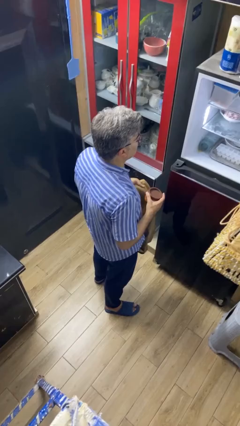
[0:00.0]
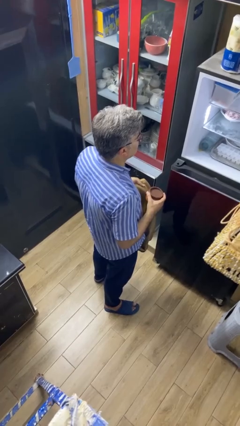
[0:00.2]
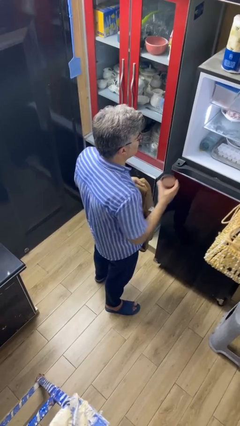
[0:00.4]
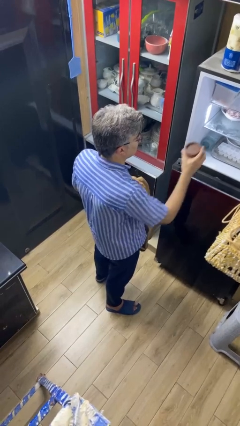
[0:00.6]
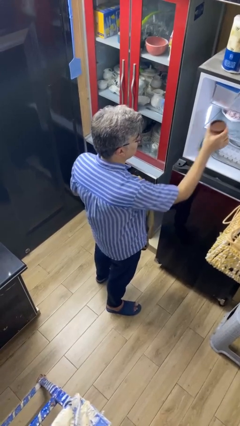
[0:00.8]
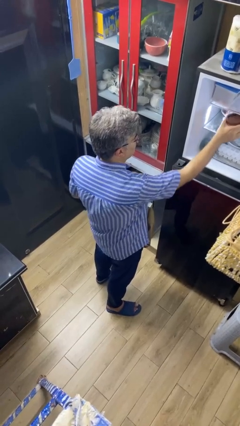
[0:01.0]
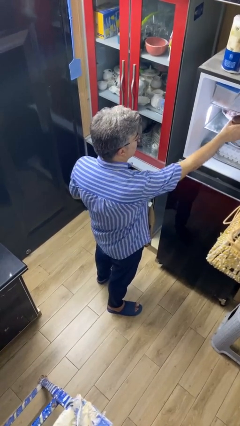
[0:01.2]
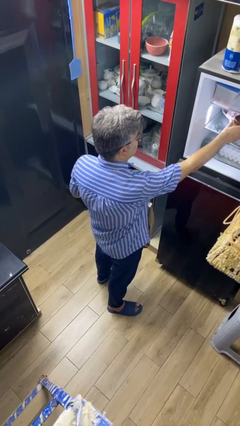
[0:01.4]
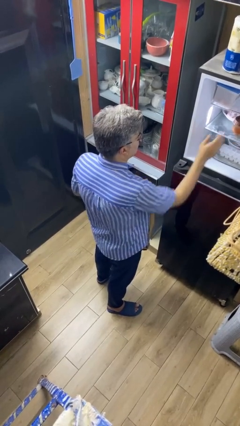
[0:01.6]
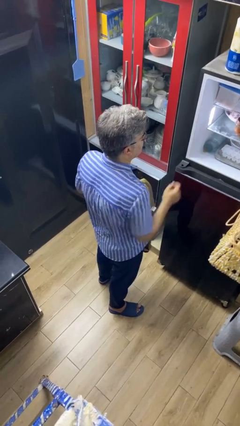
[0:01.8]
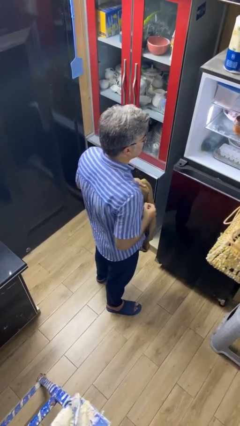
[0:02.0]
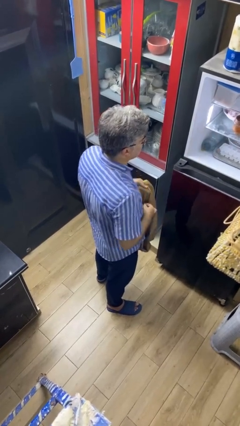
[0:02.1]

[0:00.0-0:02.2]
person loads groceries into refrigerator

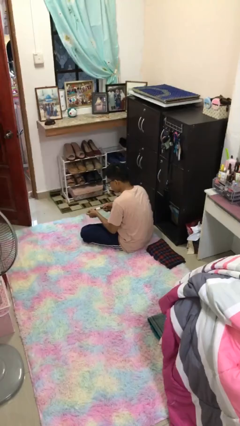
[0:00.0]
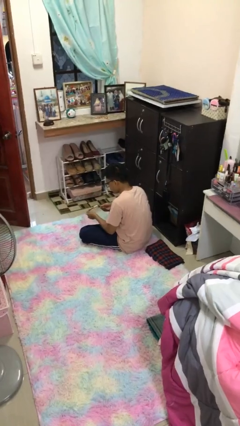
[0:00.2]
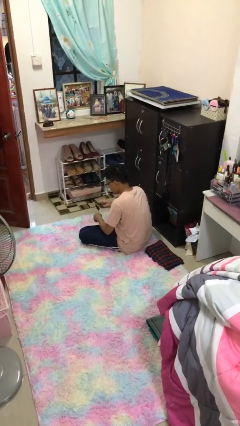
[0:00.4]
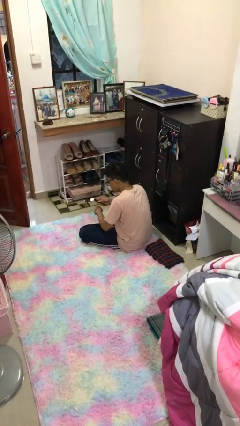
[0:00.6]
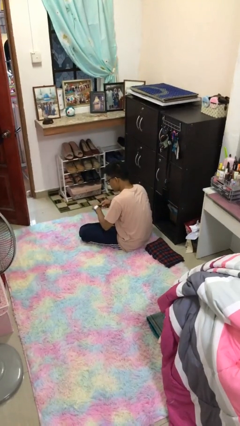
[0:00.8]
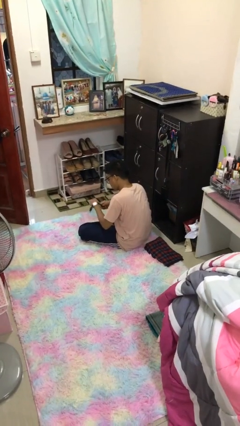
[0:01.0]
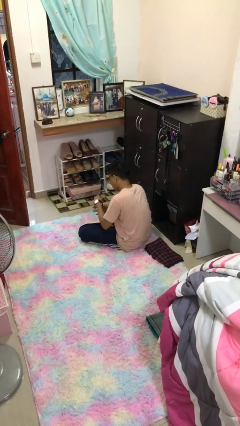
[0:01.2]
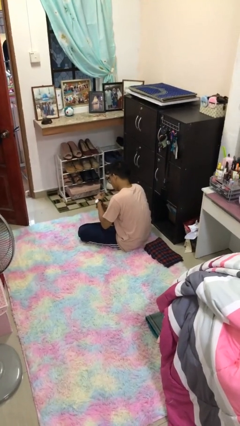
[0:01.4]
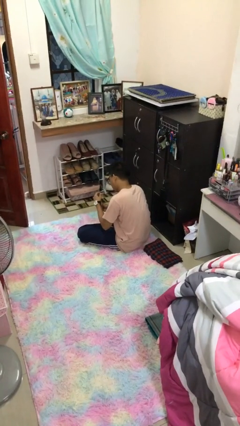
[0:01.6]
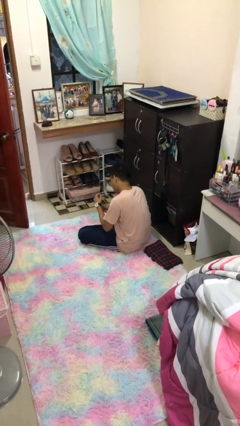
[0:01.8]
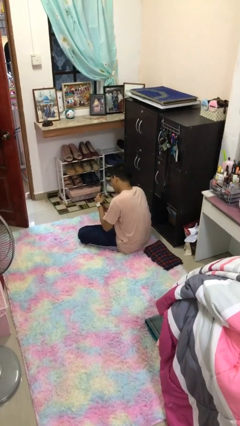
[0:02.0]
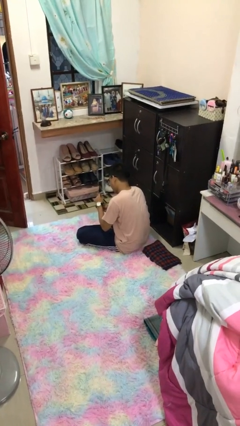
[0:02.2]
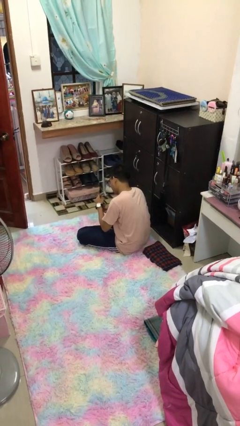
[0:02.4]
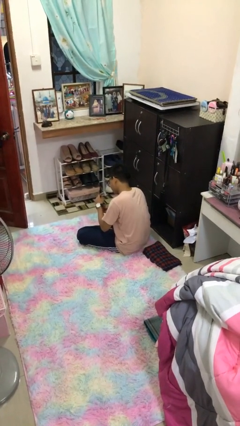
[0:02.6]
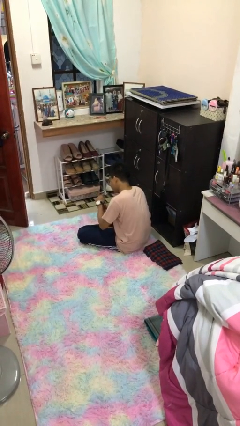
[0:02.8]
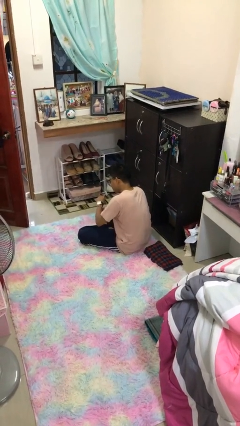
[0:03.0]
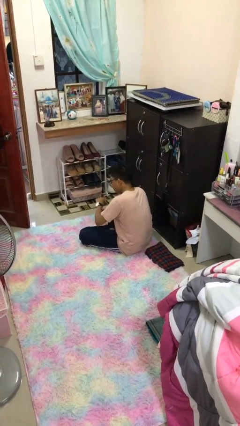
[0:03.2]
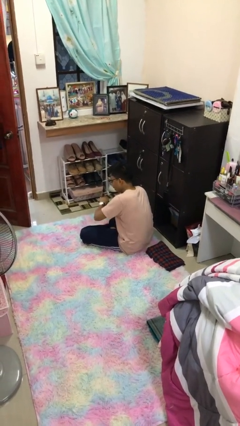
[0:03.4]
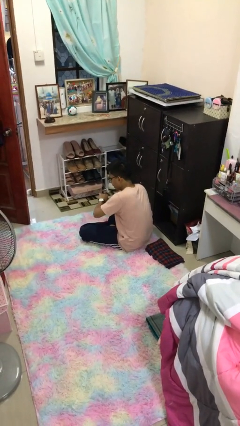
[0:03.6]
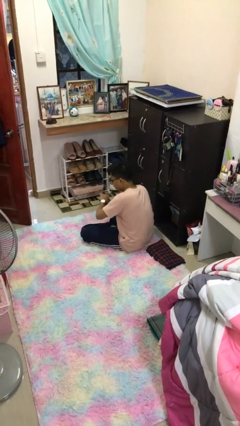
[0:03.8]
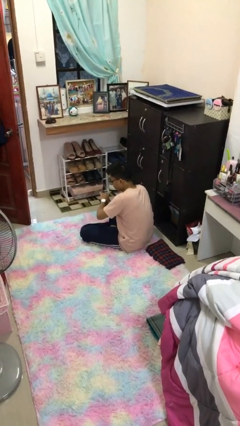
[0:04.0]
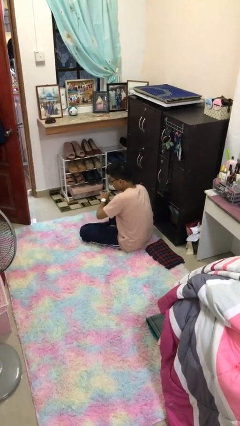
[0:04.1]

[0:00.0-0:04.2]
person puts on wristwatch

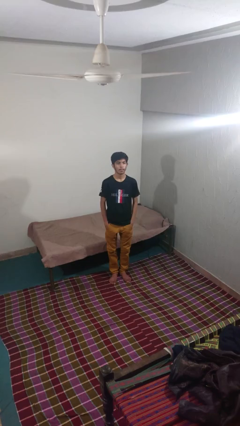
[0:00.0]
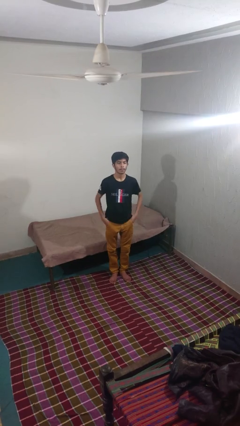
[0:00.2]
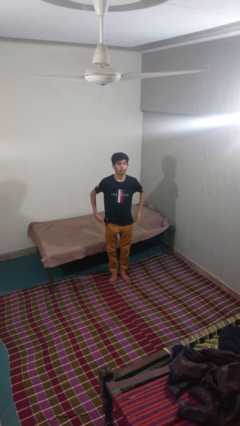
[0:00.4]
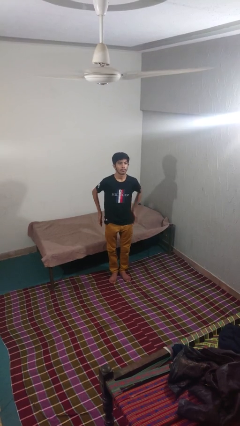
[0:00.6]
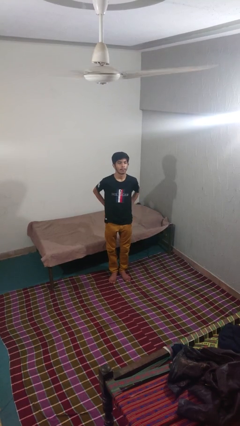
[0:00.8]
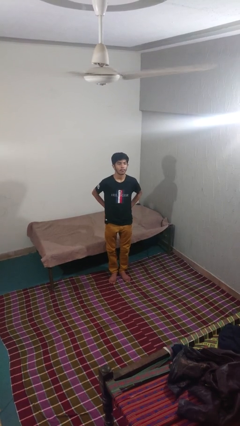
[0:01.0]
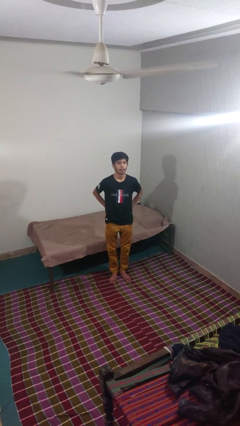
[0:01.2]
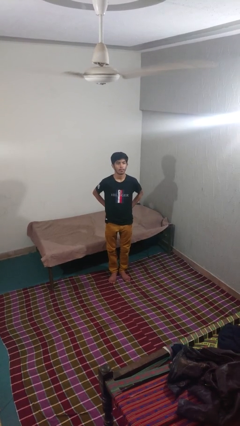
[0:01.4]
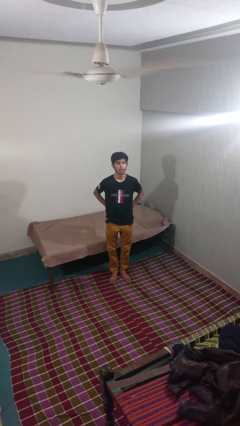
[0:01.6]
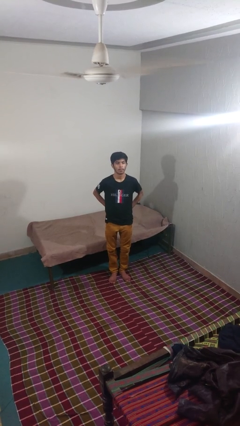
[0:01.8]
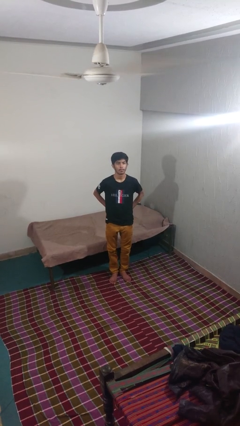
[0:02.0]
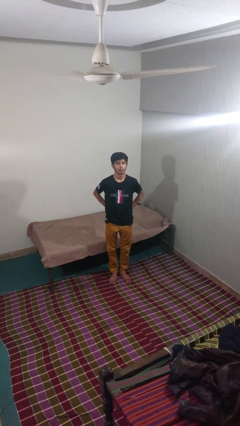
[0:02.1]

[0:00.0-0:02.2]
person puts hands in back pockets

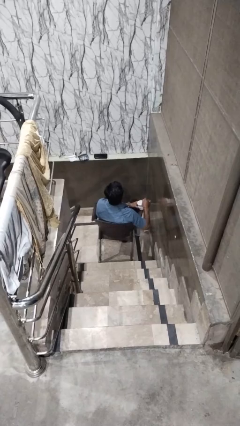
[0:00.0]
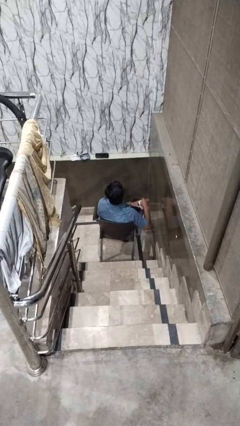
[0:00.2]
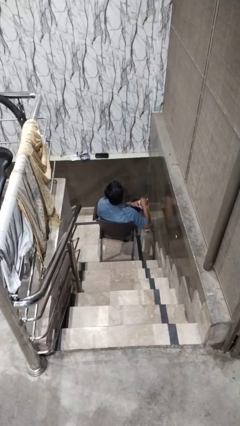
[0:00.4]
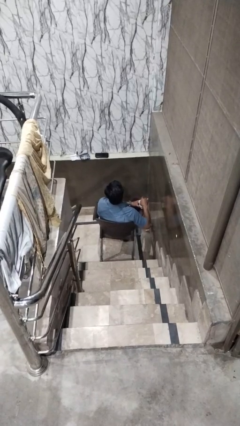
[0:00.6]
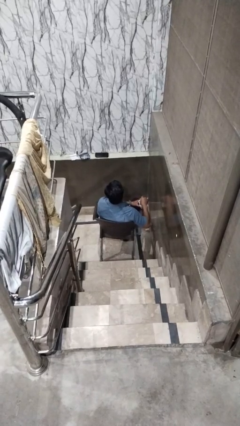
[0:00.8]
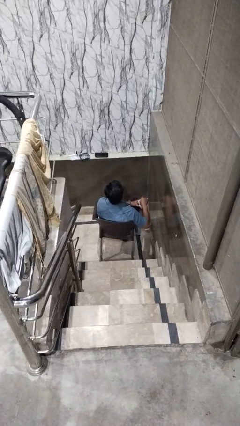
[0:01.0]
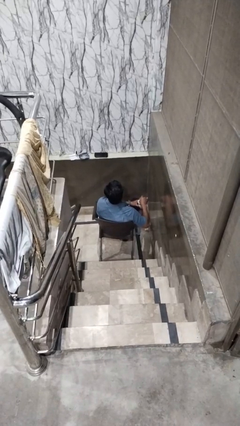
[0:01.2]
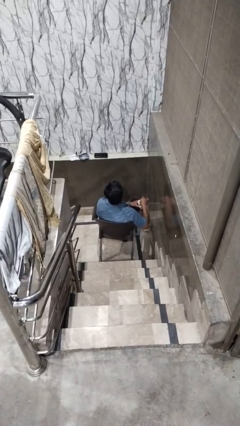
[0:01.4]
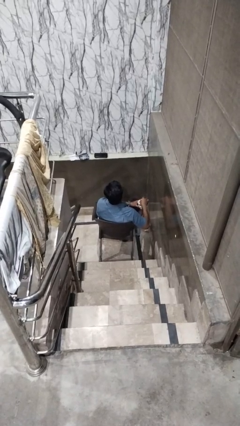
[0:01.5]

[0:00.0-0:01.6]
person stirs mug

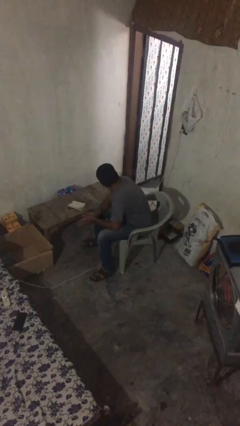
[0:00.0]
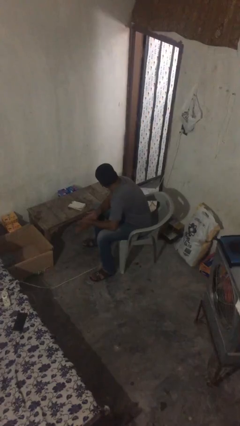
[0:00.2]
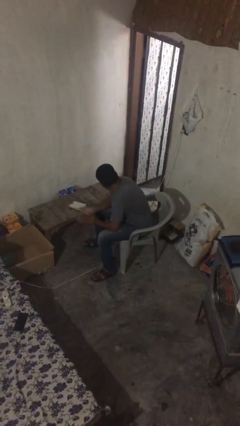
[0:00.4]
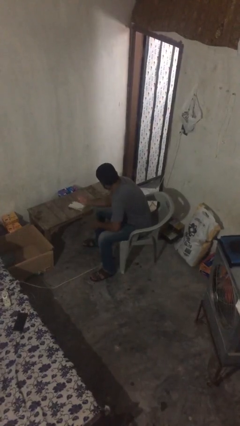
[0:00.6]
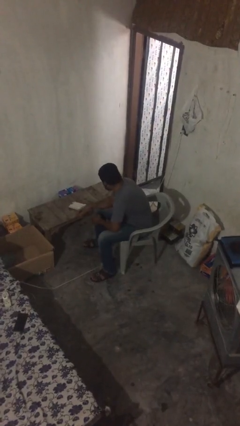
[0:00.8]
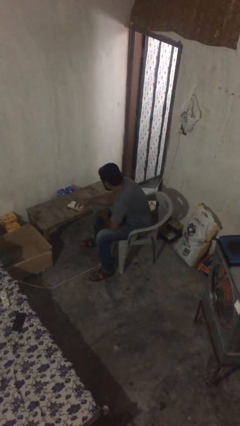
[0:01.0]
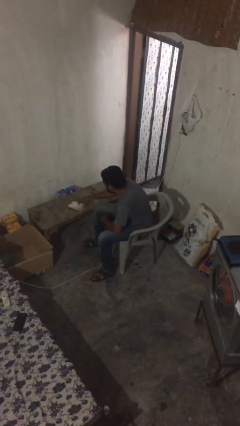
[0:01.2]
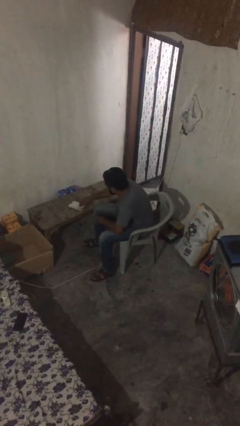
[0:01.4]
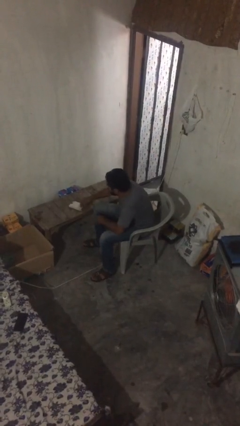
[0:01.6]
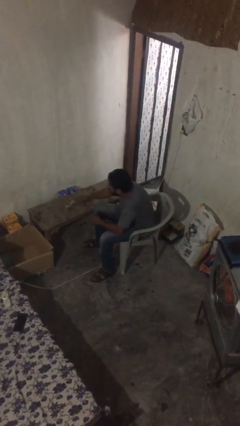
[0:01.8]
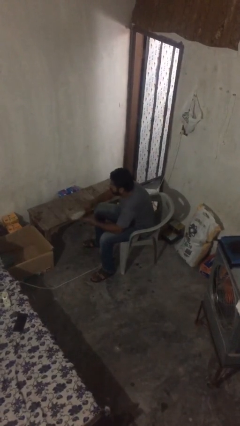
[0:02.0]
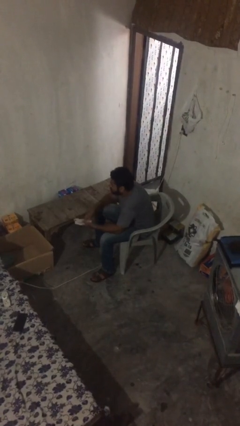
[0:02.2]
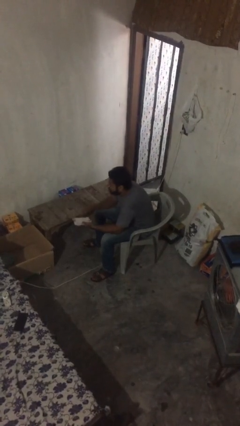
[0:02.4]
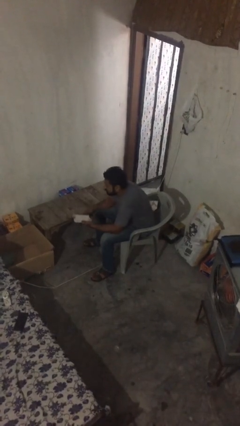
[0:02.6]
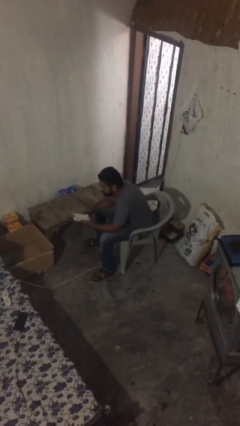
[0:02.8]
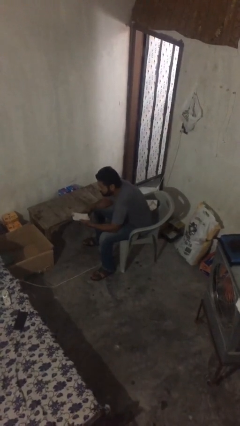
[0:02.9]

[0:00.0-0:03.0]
person picks up object from table

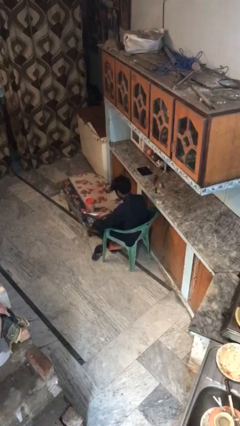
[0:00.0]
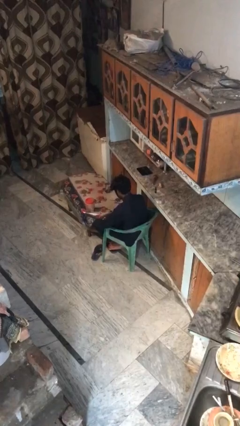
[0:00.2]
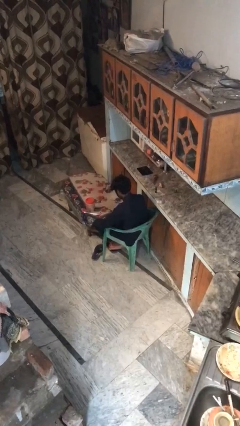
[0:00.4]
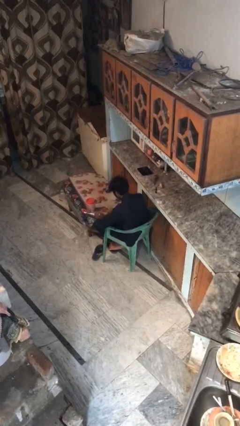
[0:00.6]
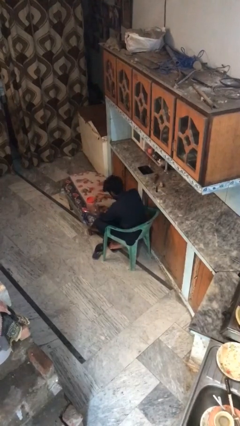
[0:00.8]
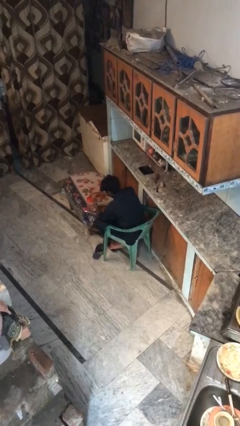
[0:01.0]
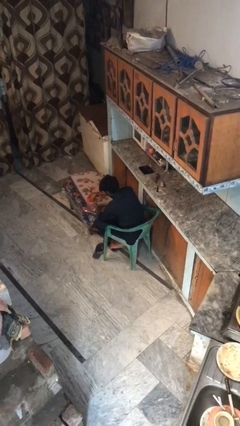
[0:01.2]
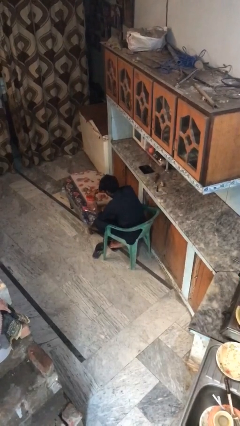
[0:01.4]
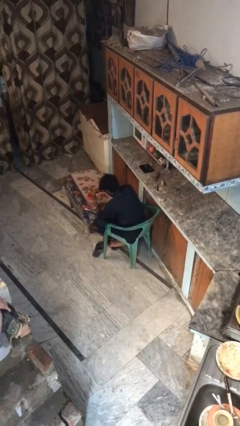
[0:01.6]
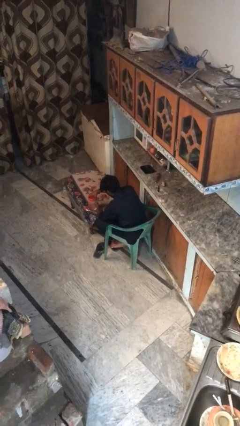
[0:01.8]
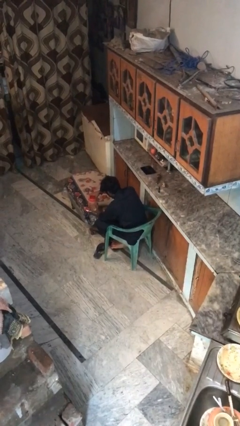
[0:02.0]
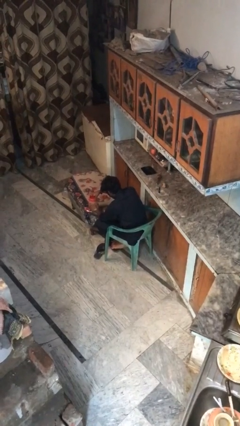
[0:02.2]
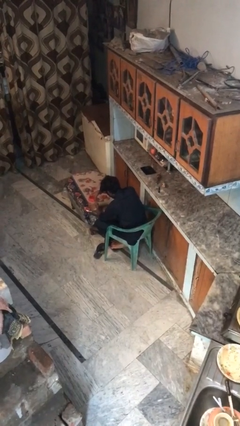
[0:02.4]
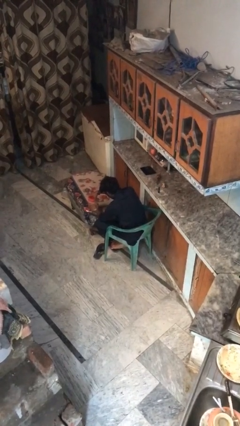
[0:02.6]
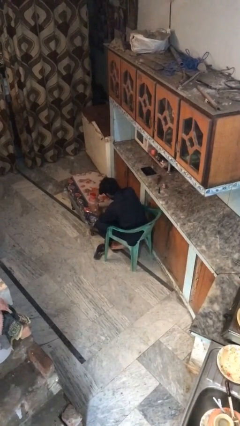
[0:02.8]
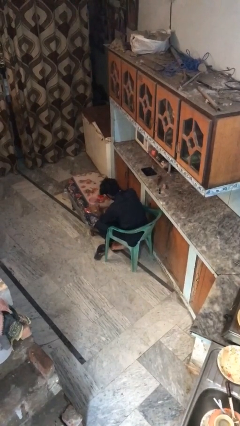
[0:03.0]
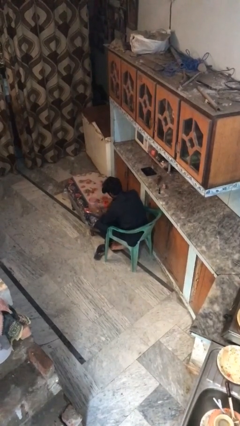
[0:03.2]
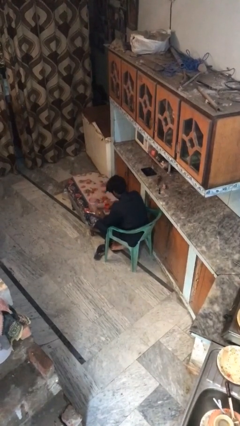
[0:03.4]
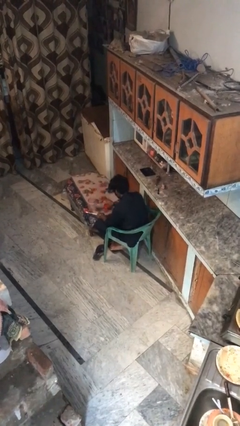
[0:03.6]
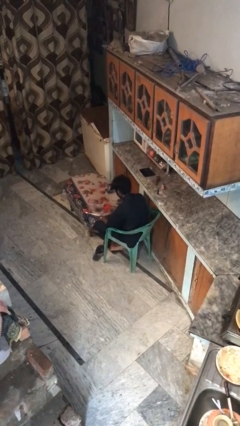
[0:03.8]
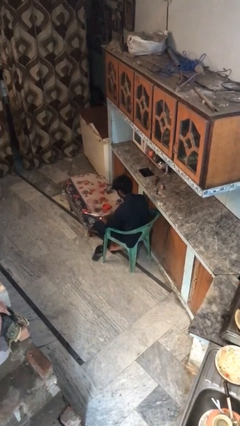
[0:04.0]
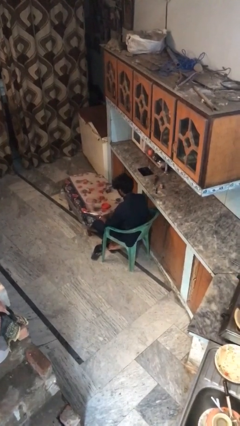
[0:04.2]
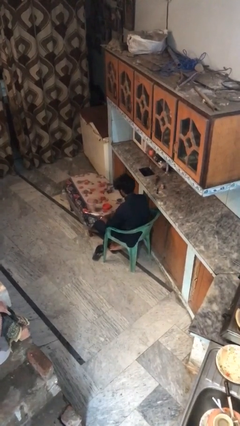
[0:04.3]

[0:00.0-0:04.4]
person opens jar
